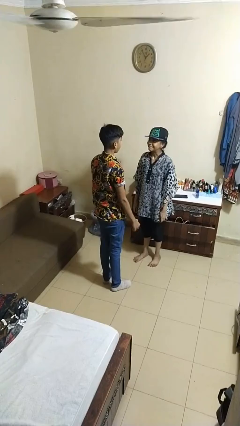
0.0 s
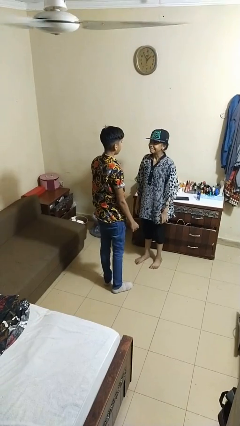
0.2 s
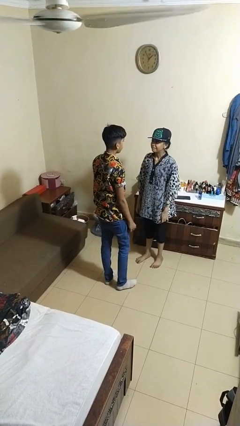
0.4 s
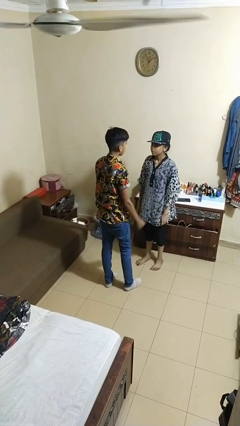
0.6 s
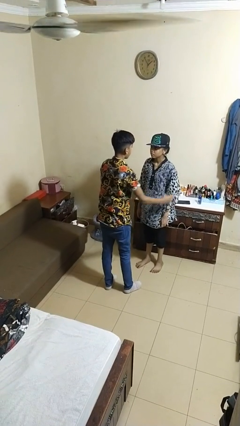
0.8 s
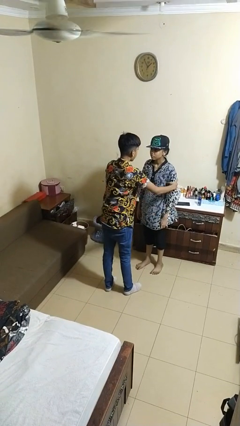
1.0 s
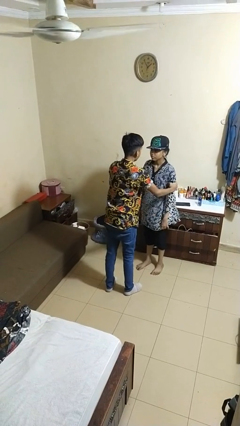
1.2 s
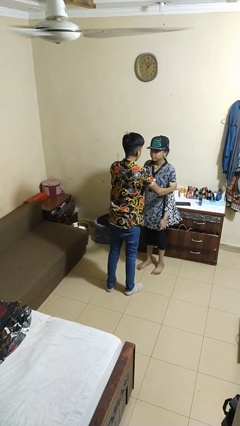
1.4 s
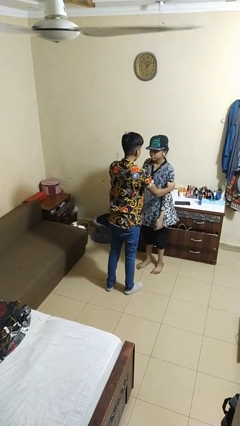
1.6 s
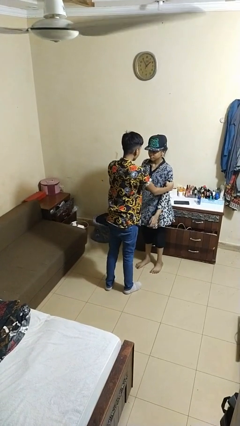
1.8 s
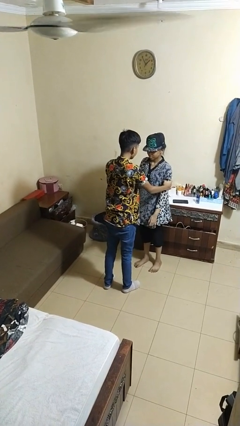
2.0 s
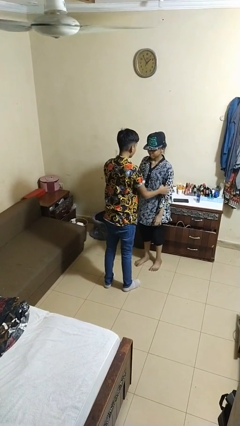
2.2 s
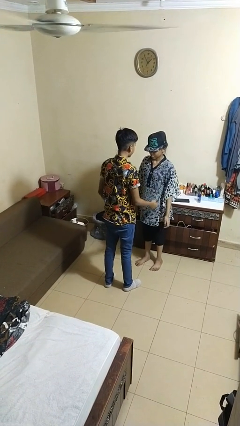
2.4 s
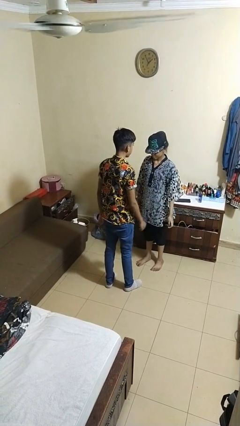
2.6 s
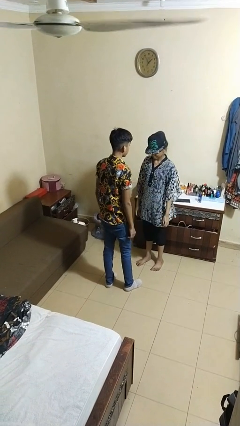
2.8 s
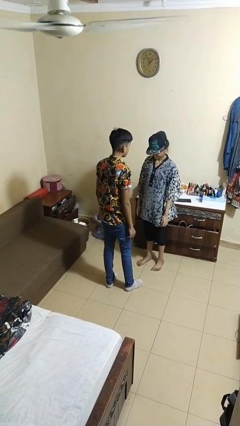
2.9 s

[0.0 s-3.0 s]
person grabs person by bicep

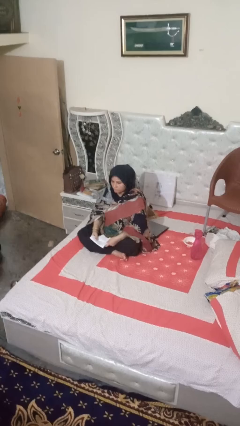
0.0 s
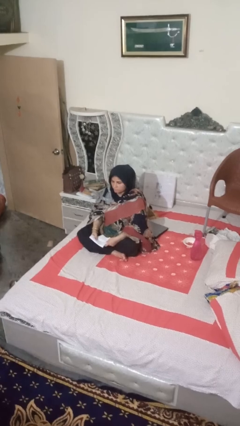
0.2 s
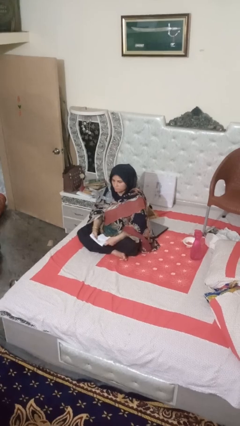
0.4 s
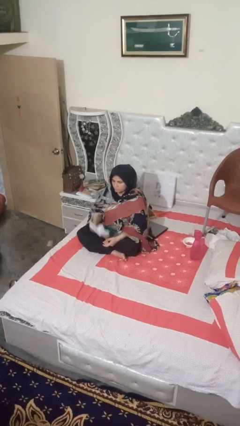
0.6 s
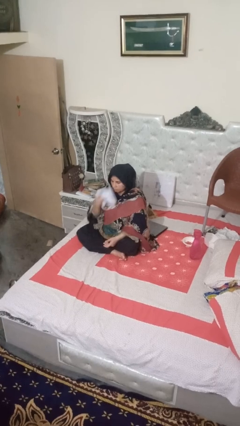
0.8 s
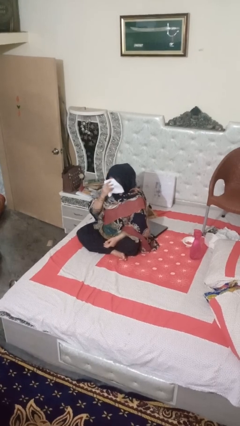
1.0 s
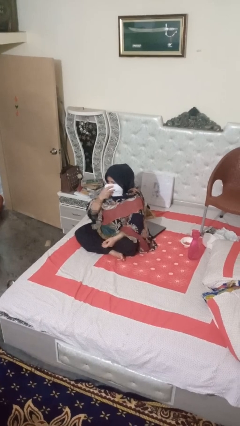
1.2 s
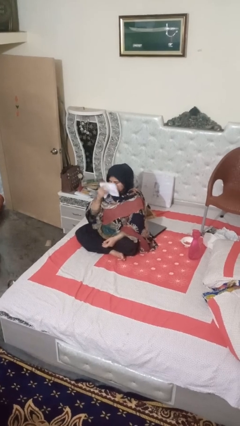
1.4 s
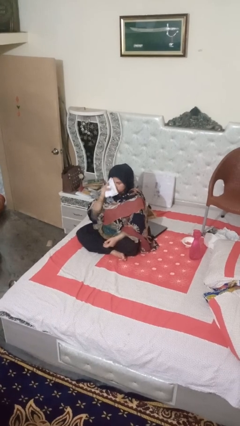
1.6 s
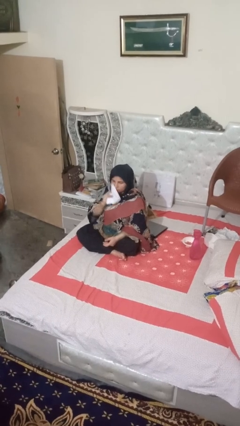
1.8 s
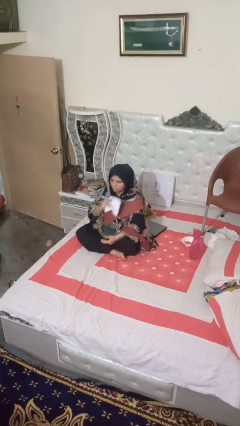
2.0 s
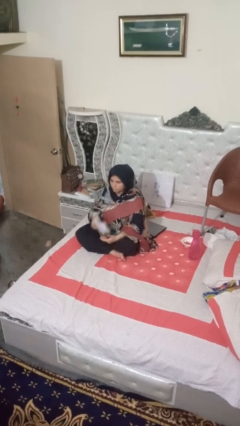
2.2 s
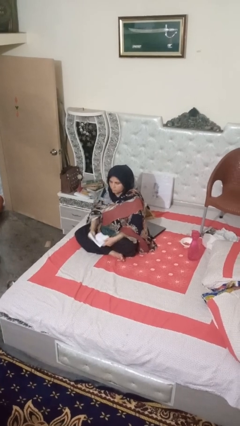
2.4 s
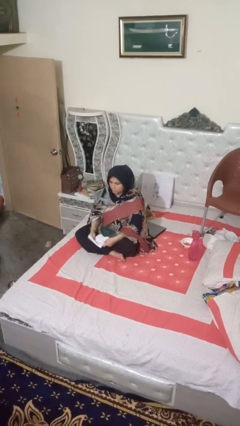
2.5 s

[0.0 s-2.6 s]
person wipes mouth with napkin

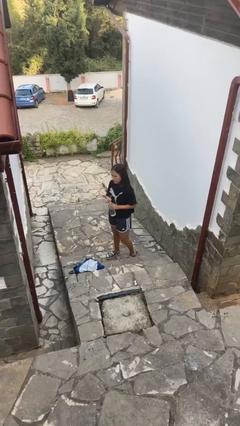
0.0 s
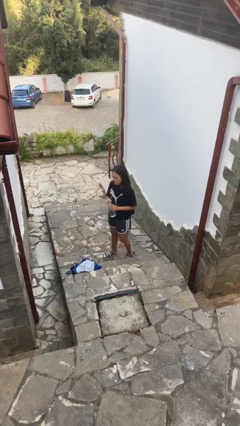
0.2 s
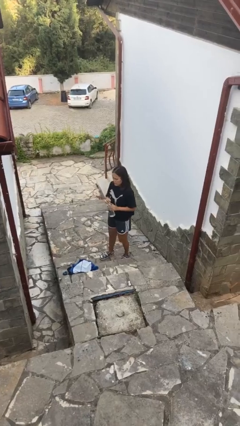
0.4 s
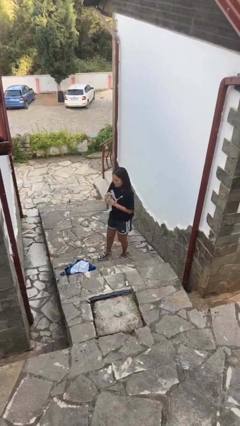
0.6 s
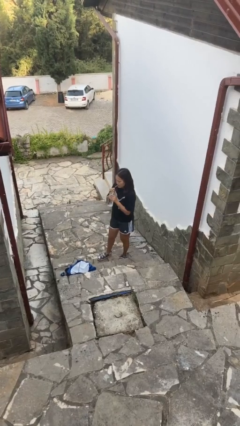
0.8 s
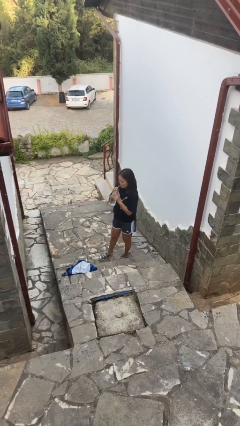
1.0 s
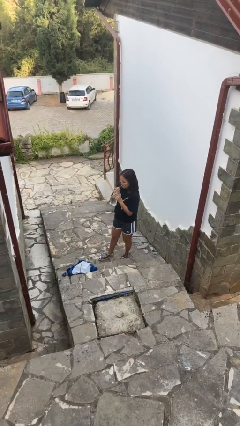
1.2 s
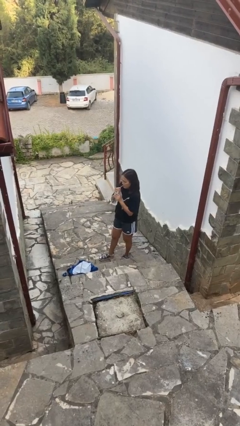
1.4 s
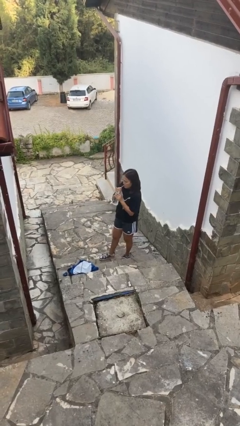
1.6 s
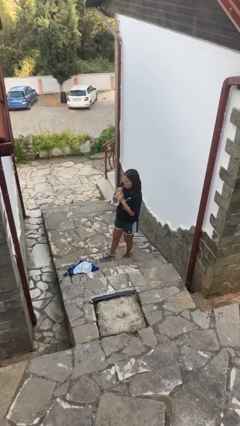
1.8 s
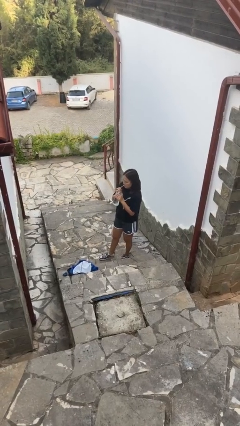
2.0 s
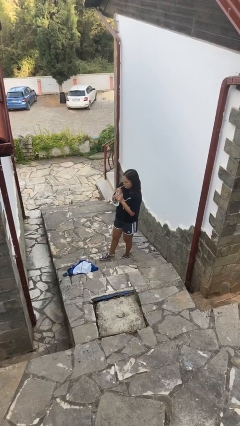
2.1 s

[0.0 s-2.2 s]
person drinks from straw

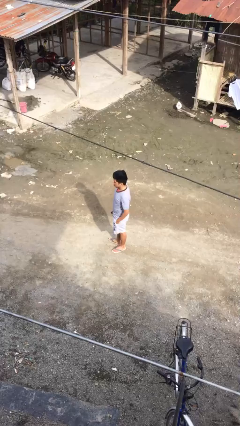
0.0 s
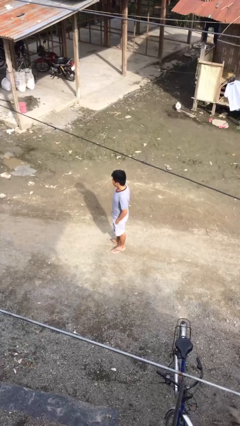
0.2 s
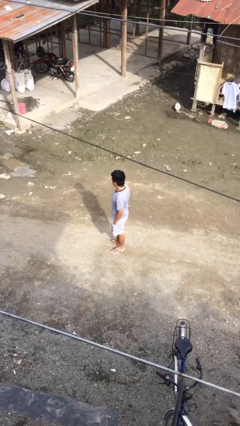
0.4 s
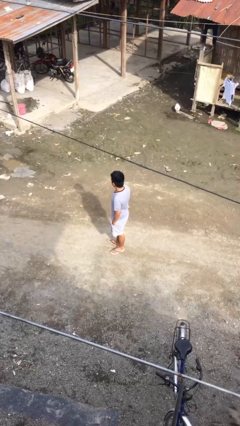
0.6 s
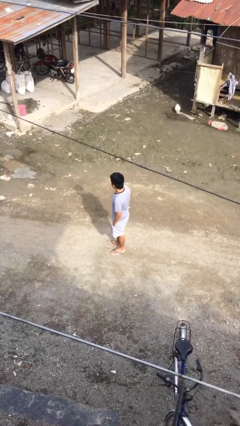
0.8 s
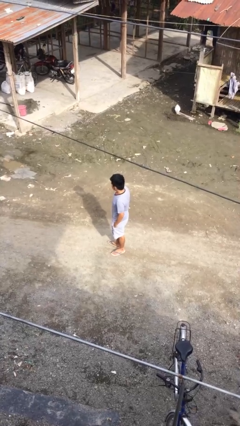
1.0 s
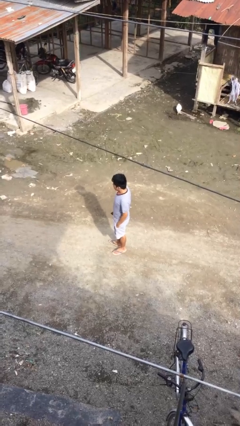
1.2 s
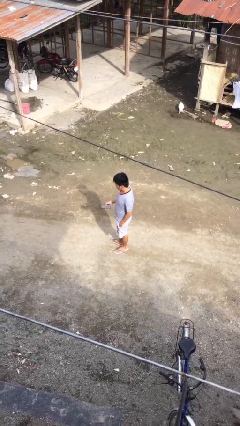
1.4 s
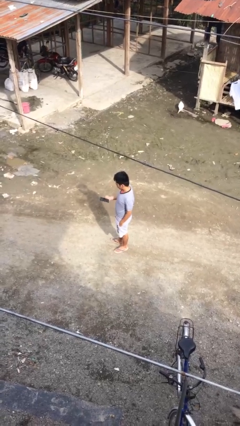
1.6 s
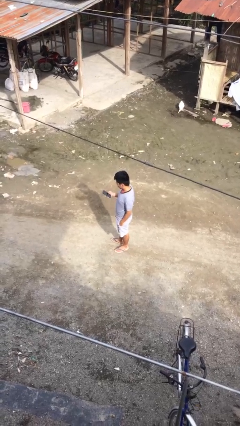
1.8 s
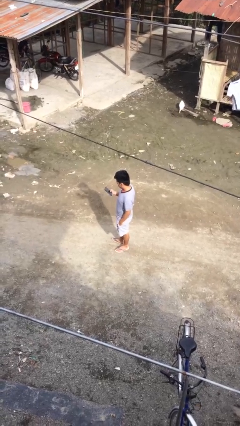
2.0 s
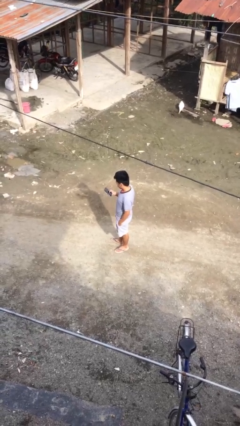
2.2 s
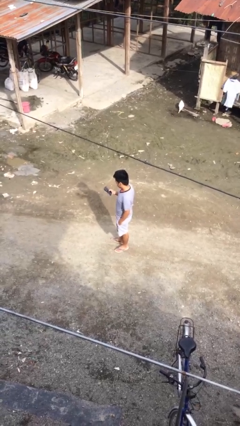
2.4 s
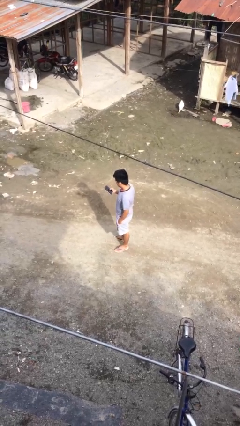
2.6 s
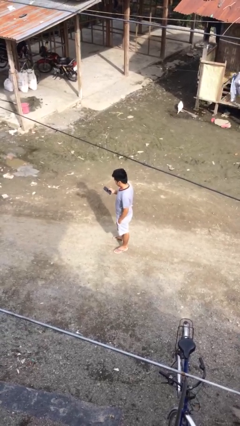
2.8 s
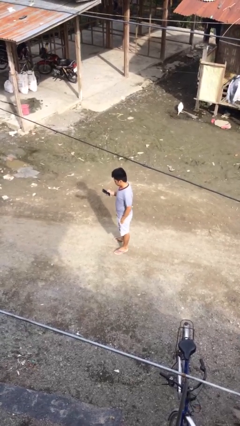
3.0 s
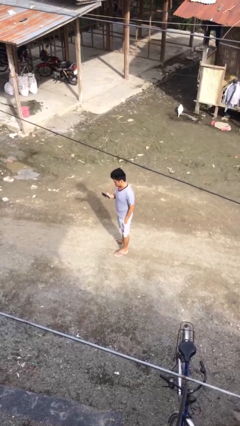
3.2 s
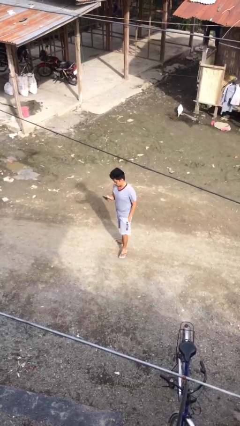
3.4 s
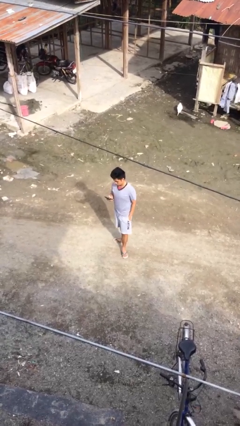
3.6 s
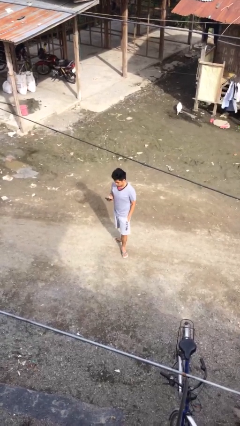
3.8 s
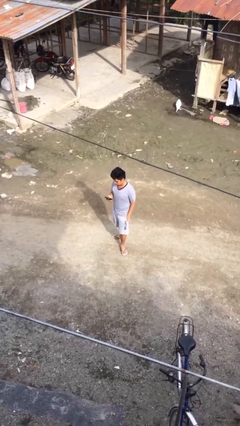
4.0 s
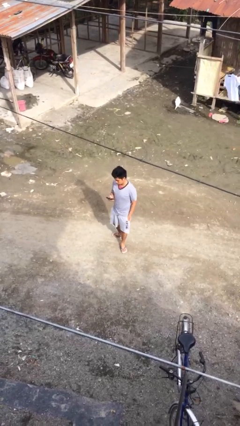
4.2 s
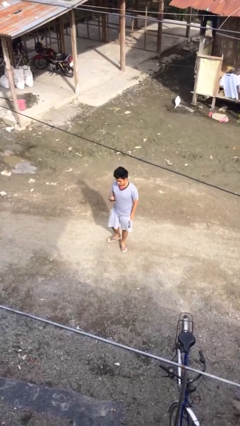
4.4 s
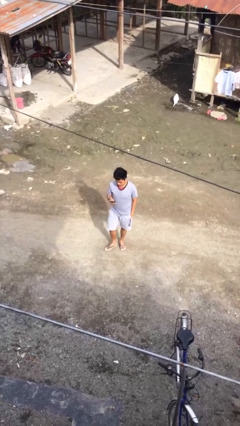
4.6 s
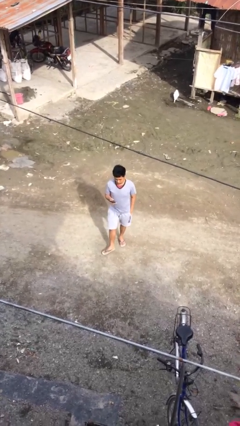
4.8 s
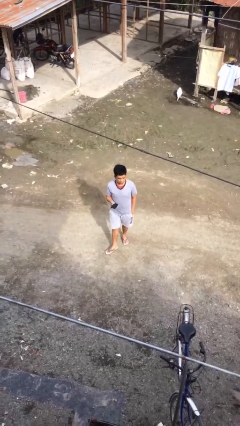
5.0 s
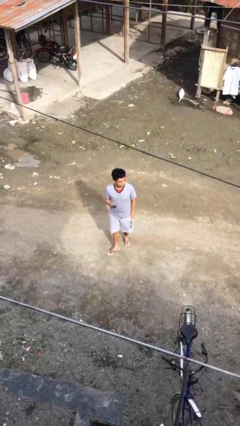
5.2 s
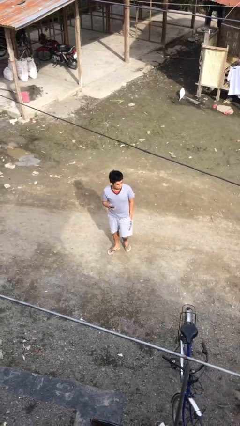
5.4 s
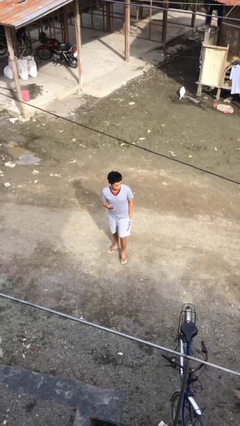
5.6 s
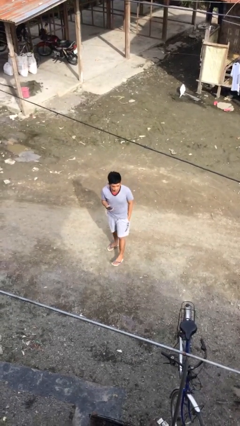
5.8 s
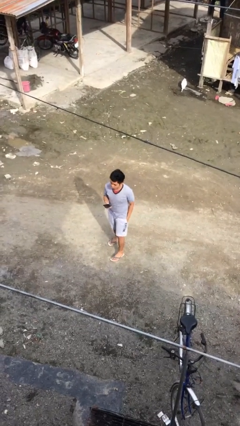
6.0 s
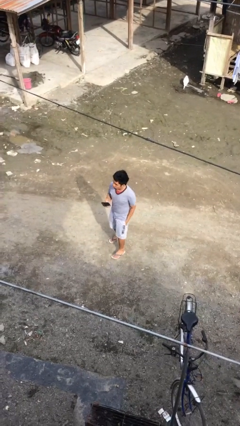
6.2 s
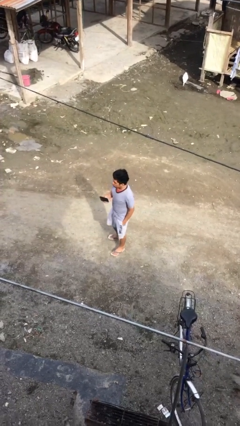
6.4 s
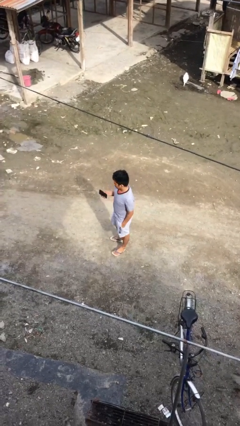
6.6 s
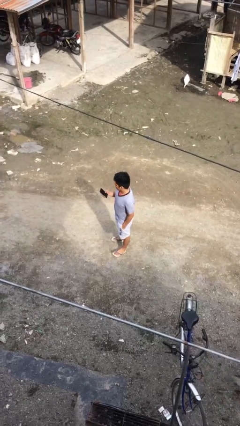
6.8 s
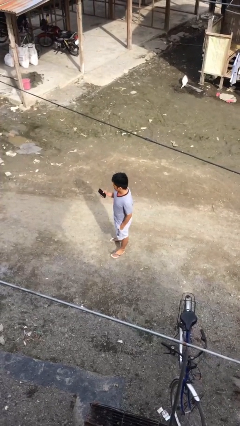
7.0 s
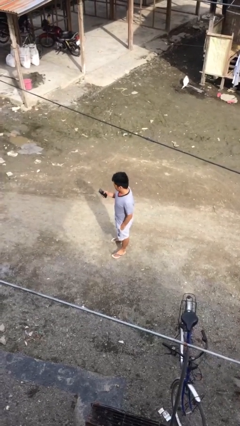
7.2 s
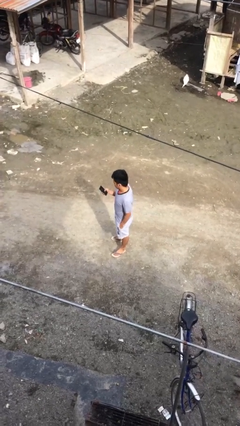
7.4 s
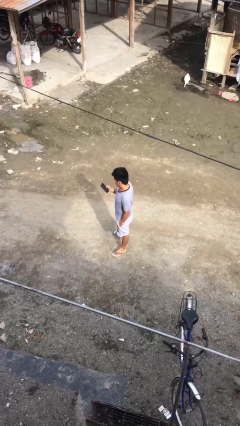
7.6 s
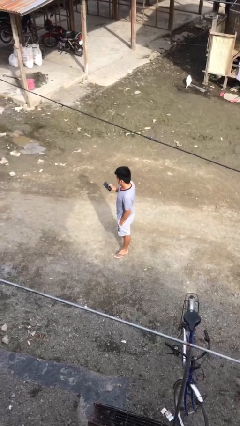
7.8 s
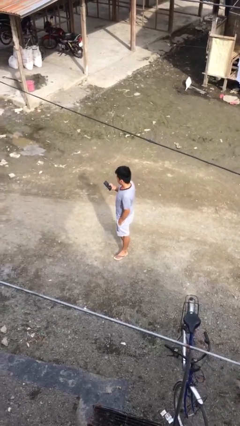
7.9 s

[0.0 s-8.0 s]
person walks

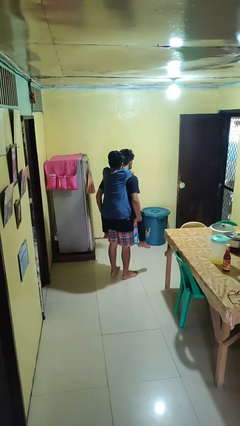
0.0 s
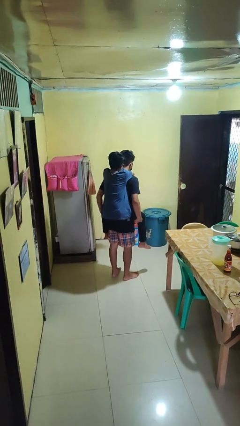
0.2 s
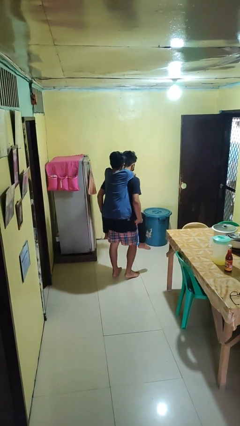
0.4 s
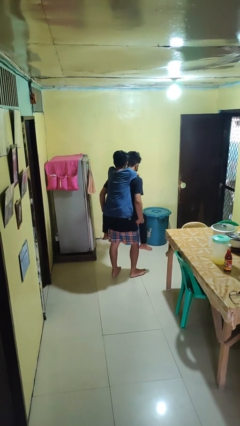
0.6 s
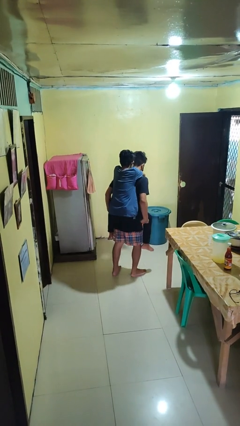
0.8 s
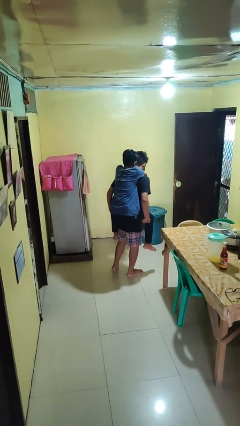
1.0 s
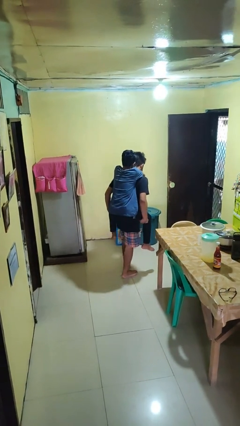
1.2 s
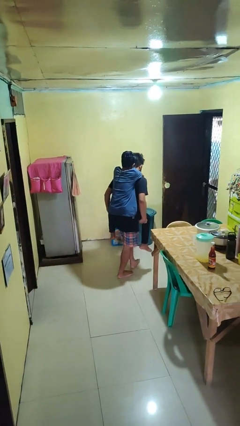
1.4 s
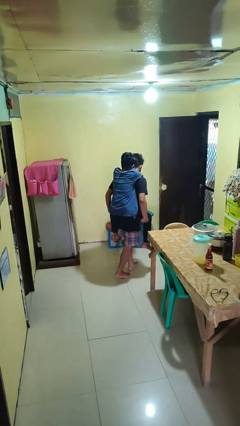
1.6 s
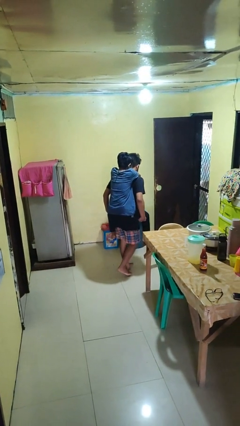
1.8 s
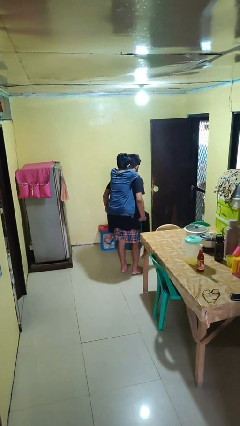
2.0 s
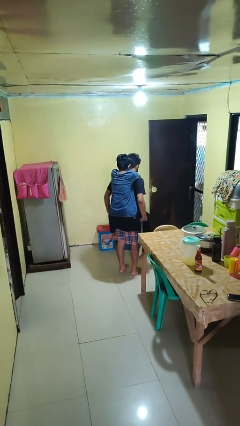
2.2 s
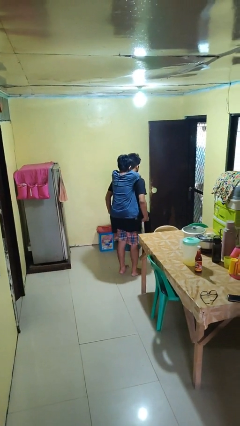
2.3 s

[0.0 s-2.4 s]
person carries person on back
